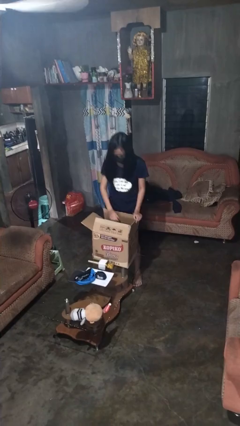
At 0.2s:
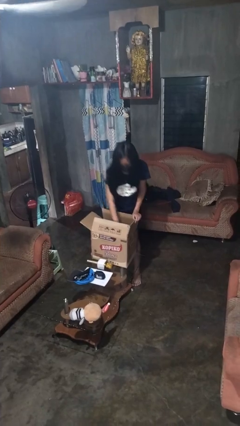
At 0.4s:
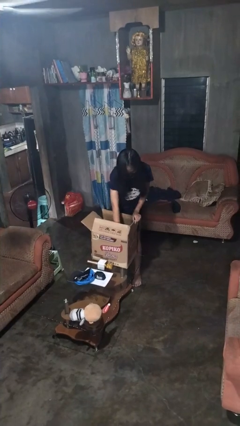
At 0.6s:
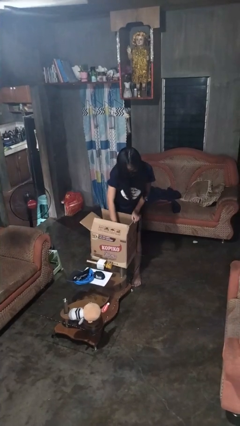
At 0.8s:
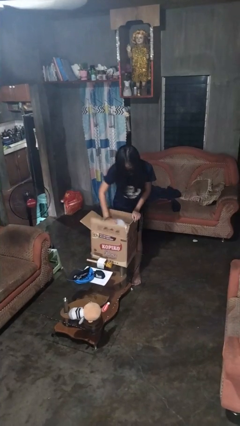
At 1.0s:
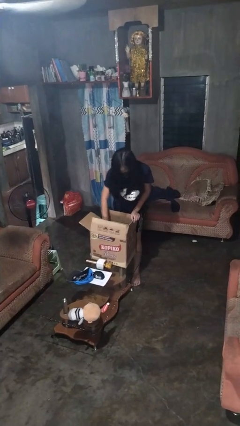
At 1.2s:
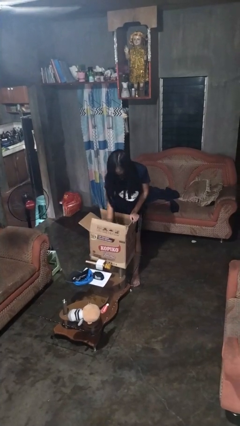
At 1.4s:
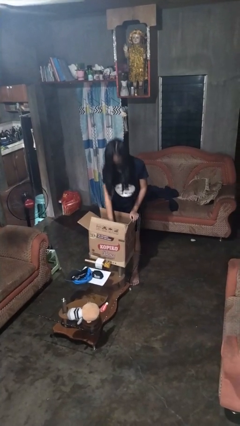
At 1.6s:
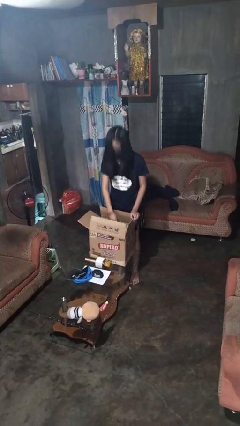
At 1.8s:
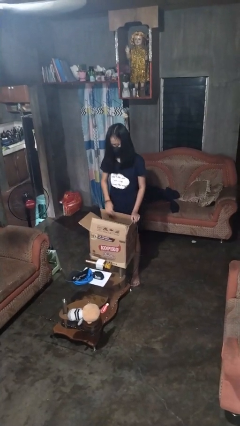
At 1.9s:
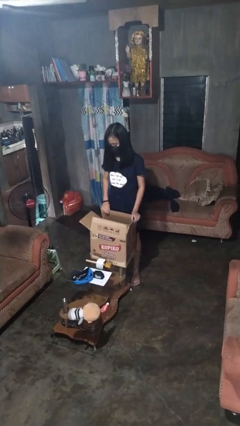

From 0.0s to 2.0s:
person searches in box

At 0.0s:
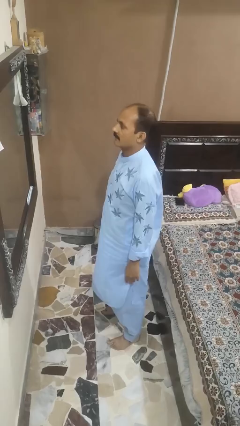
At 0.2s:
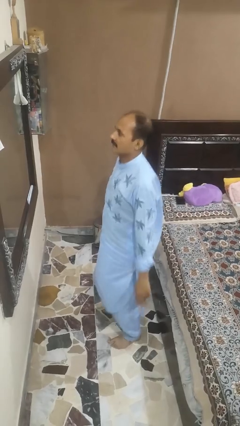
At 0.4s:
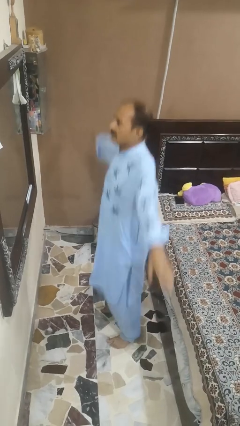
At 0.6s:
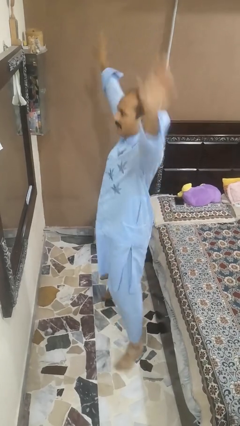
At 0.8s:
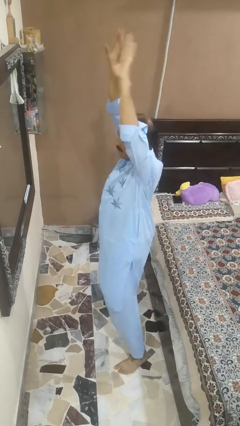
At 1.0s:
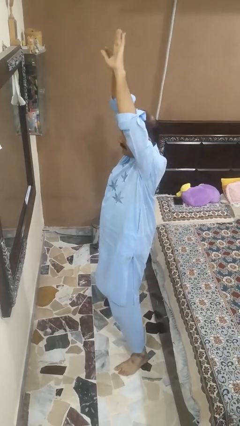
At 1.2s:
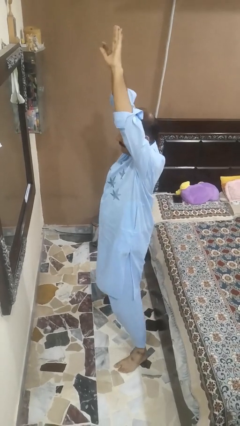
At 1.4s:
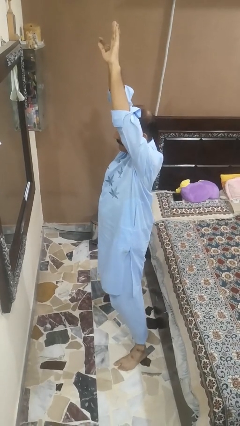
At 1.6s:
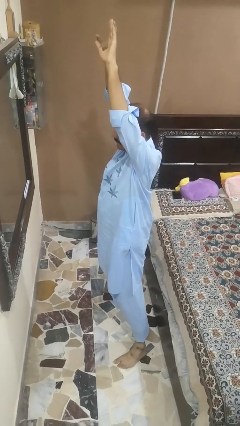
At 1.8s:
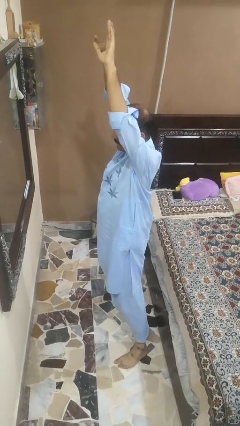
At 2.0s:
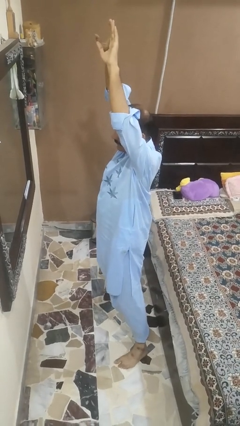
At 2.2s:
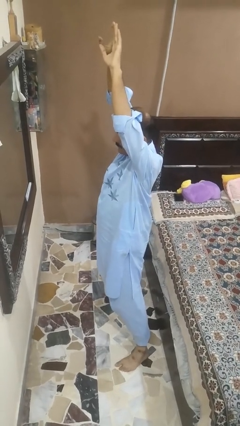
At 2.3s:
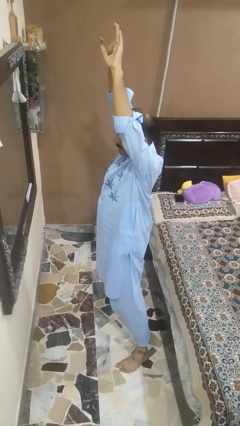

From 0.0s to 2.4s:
person exercises with jumping jacks

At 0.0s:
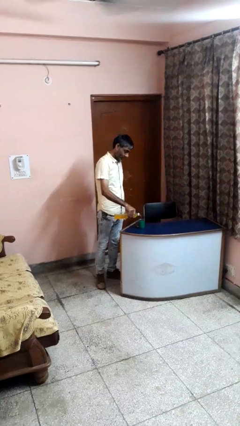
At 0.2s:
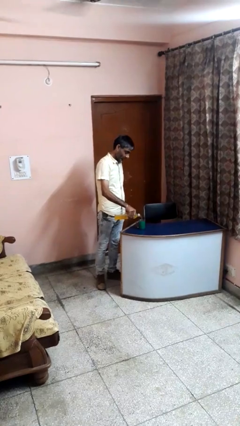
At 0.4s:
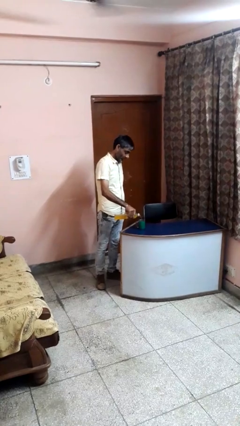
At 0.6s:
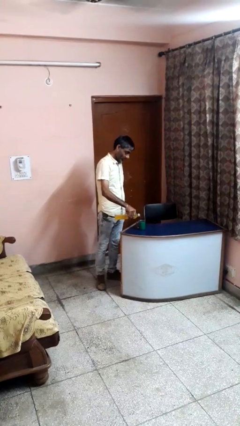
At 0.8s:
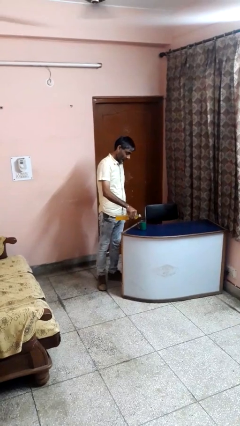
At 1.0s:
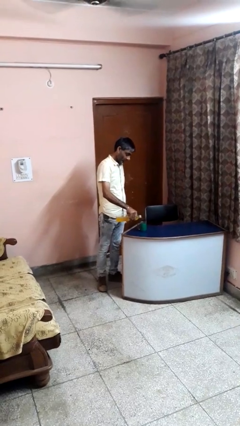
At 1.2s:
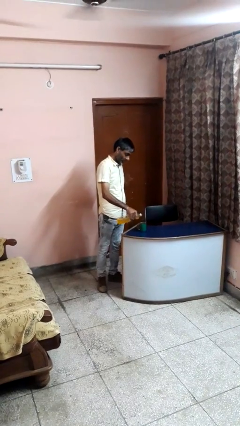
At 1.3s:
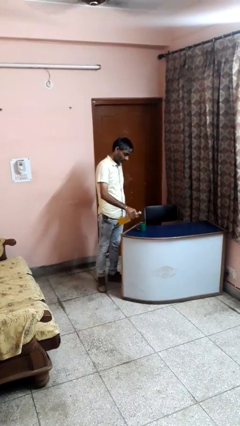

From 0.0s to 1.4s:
person pours liquid into cup

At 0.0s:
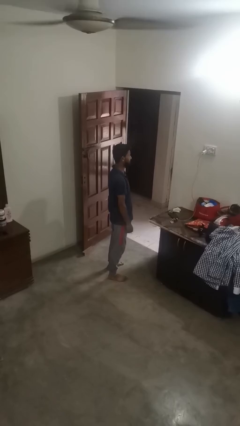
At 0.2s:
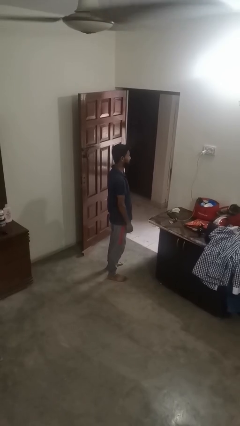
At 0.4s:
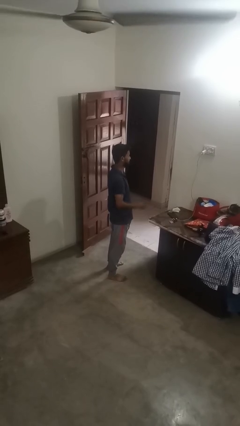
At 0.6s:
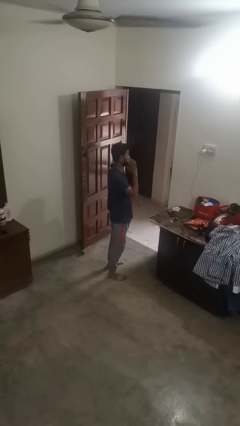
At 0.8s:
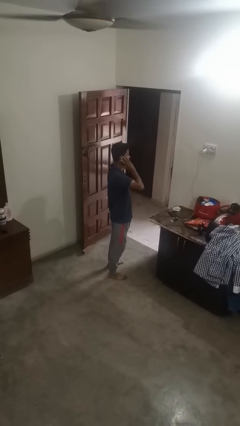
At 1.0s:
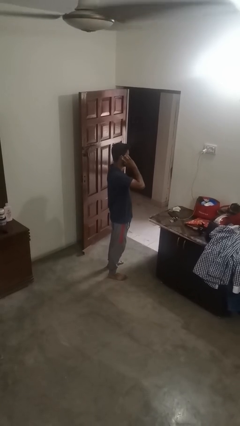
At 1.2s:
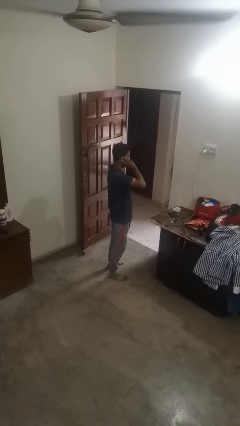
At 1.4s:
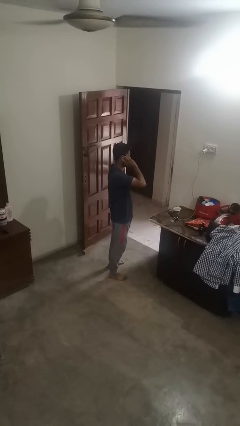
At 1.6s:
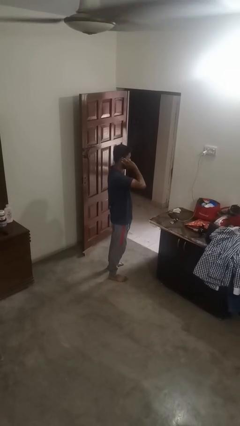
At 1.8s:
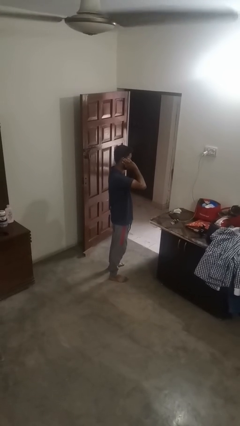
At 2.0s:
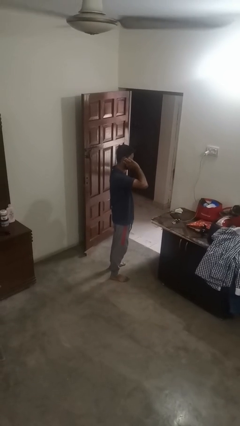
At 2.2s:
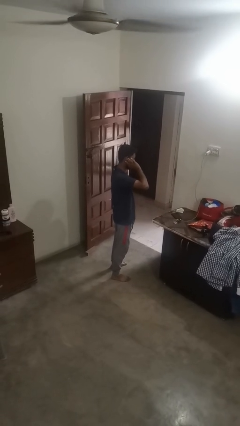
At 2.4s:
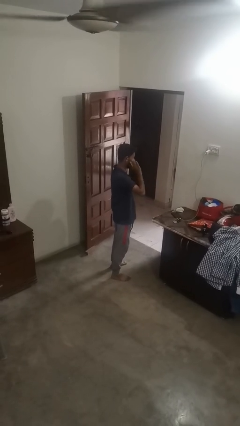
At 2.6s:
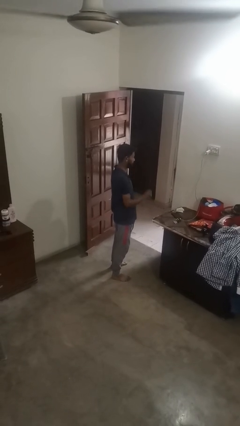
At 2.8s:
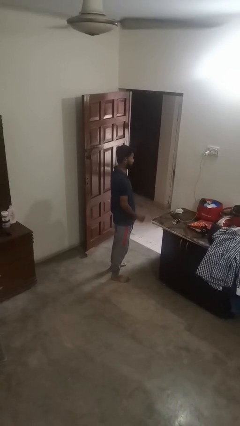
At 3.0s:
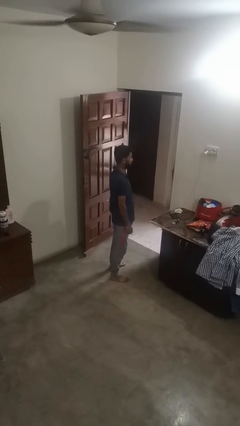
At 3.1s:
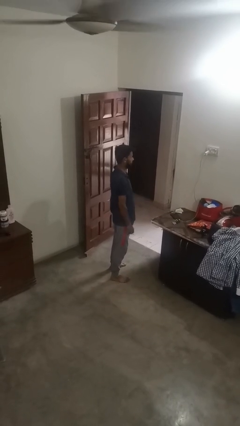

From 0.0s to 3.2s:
person touches earlobe

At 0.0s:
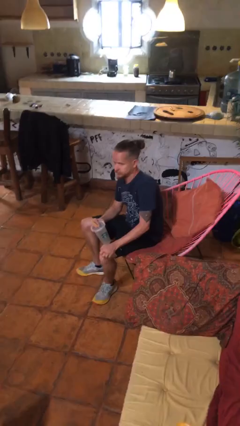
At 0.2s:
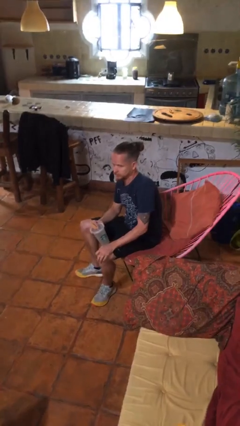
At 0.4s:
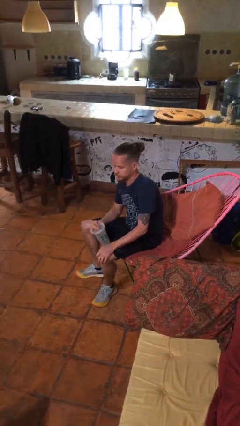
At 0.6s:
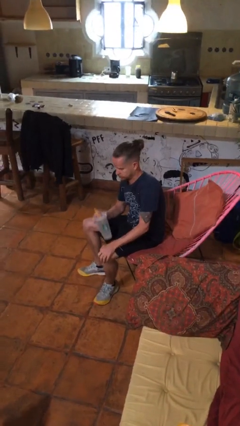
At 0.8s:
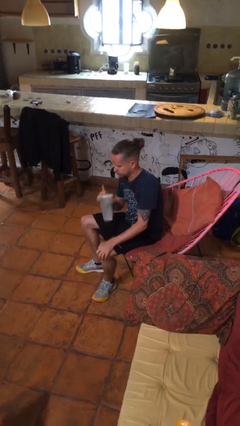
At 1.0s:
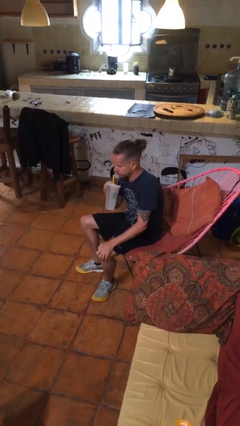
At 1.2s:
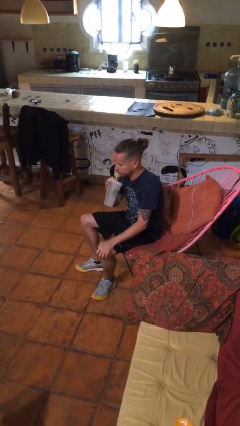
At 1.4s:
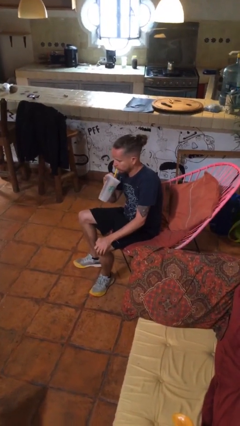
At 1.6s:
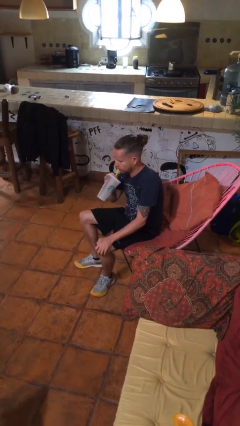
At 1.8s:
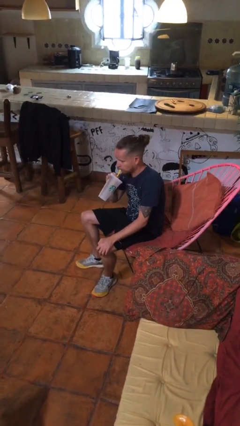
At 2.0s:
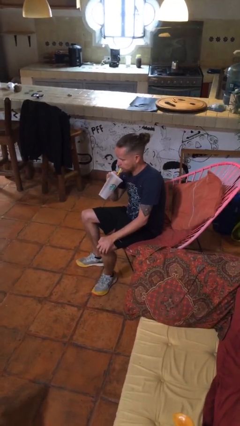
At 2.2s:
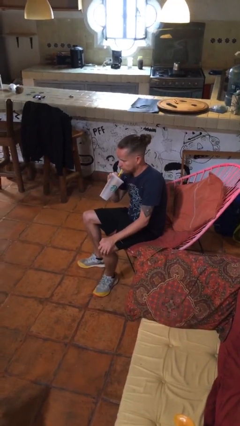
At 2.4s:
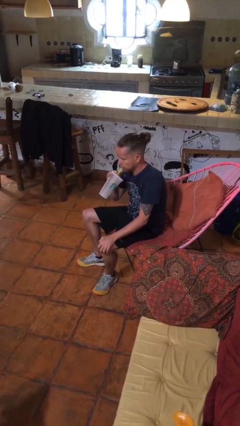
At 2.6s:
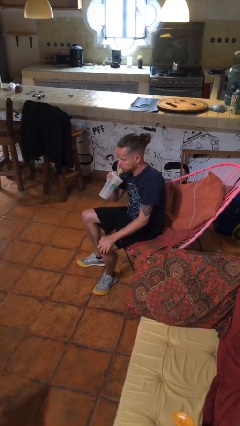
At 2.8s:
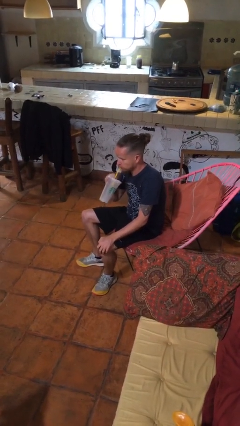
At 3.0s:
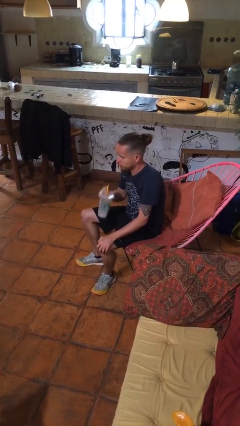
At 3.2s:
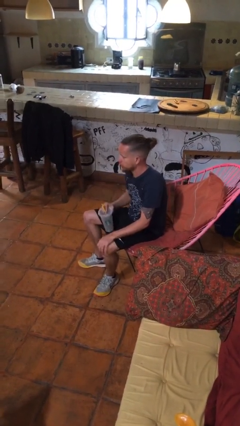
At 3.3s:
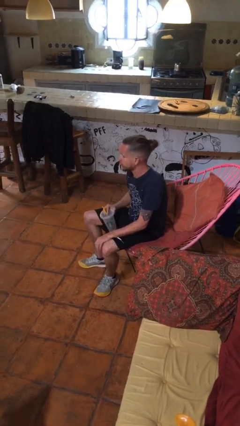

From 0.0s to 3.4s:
person drinks from straw

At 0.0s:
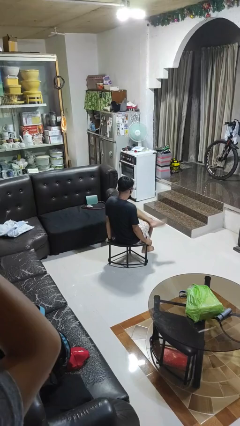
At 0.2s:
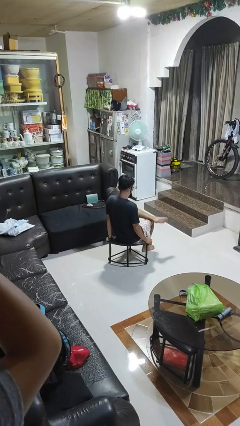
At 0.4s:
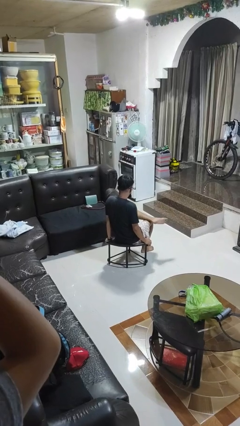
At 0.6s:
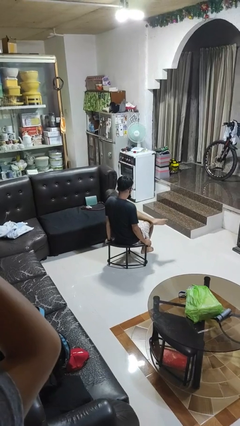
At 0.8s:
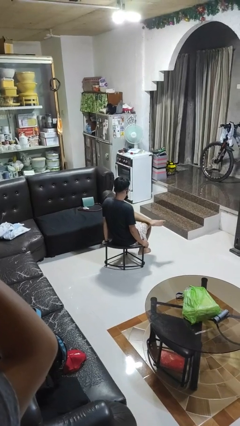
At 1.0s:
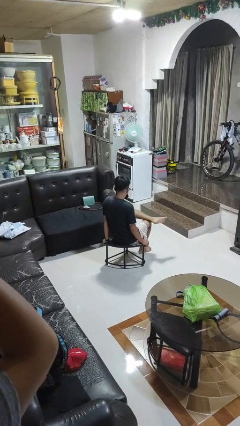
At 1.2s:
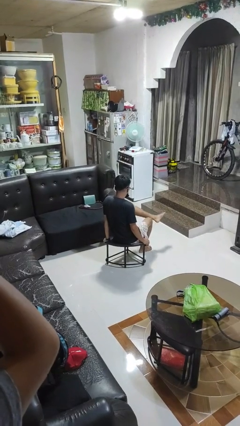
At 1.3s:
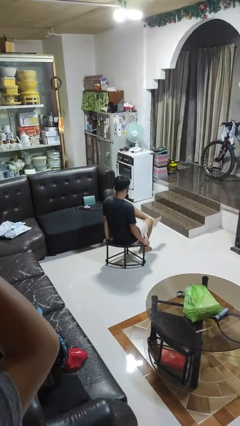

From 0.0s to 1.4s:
person crosses legs

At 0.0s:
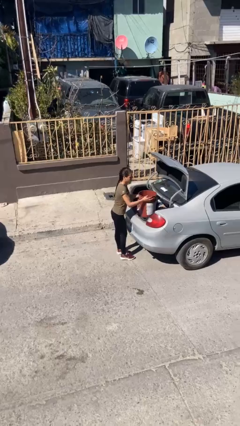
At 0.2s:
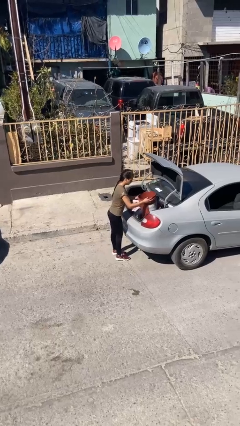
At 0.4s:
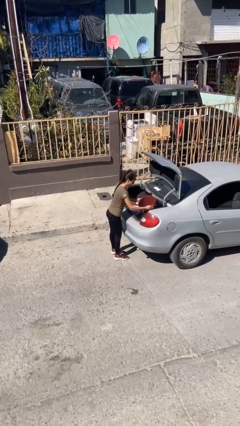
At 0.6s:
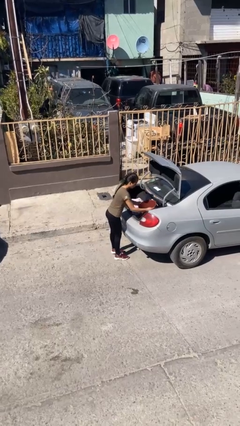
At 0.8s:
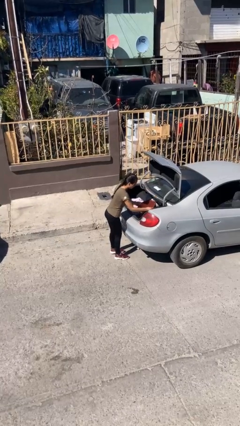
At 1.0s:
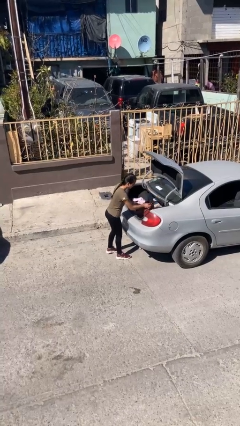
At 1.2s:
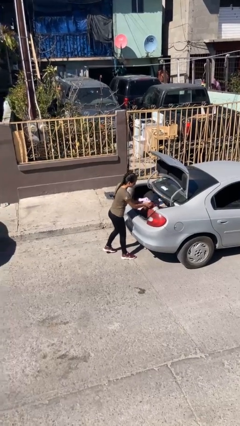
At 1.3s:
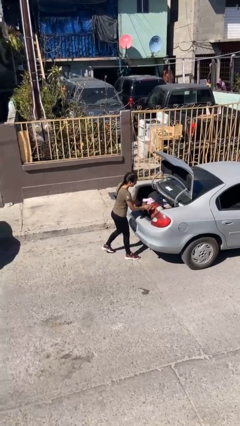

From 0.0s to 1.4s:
person loads car

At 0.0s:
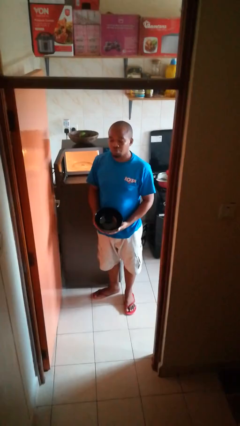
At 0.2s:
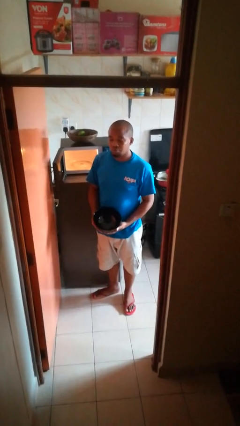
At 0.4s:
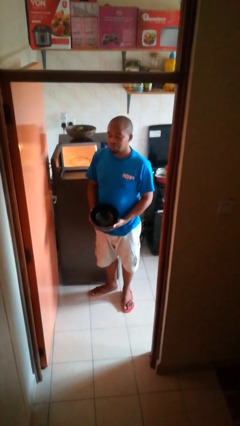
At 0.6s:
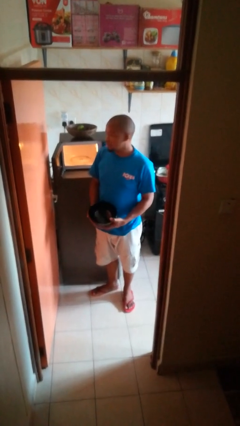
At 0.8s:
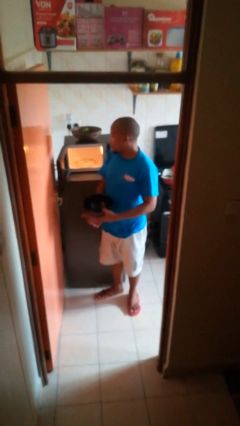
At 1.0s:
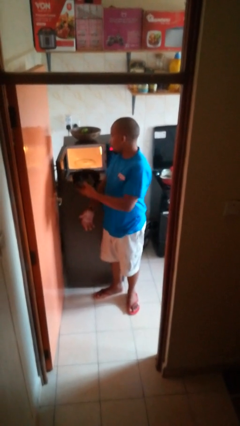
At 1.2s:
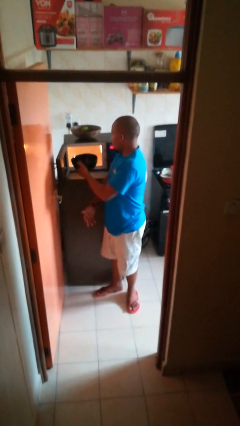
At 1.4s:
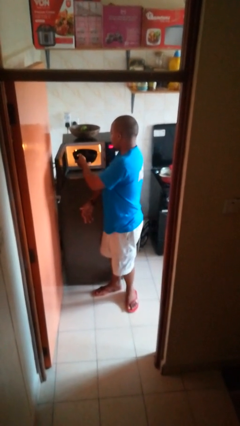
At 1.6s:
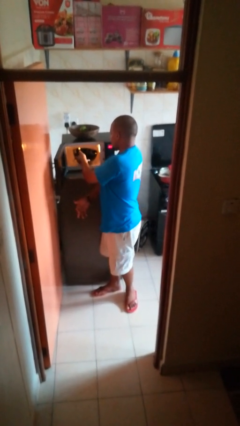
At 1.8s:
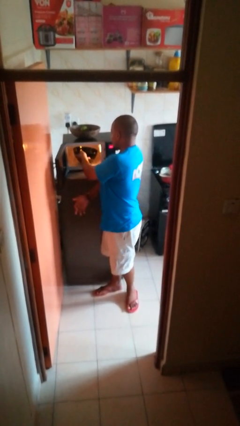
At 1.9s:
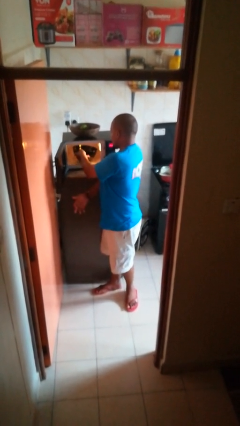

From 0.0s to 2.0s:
person puts object into microwave
